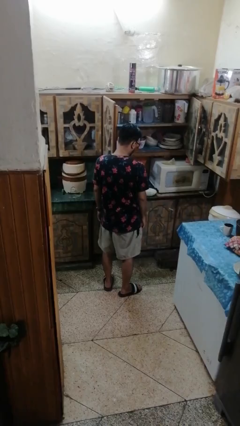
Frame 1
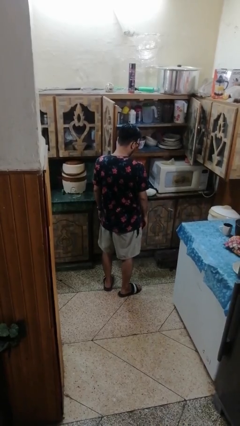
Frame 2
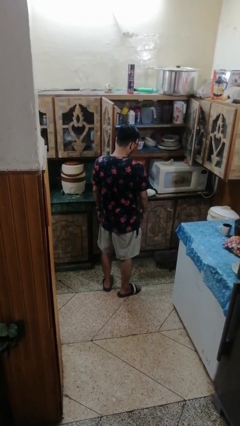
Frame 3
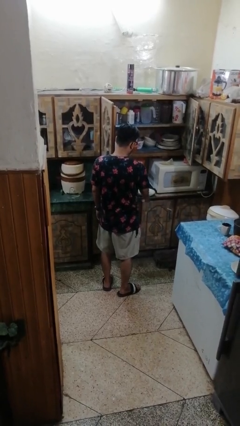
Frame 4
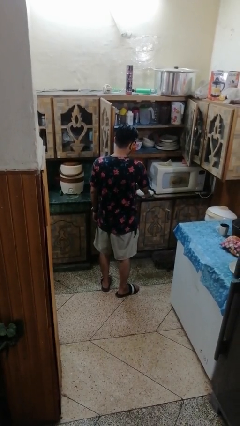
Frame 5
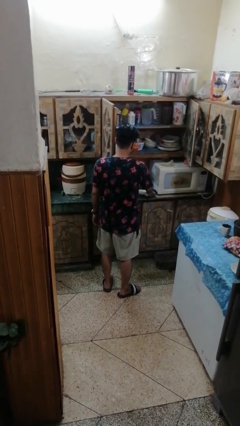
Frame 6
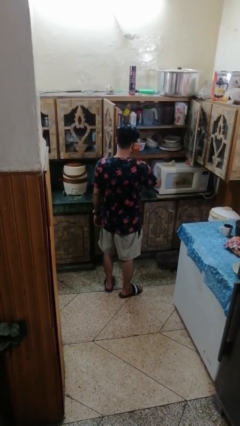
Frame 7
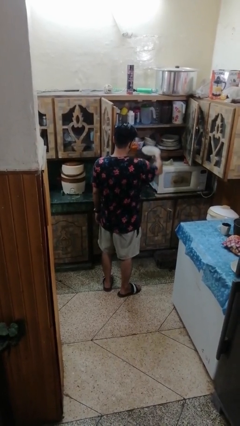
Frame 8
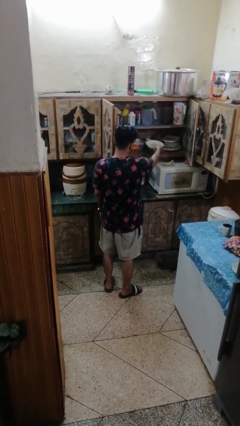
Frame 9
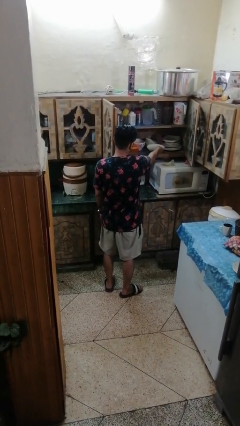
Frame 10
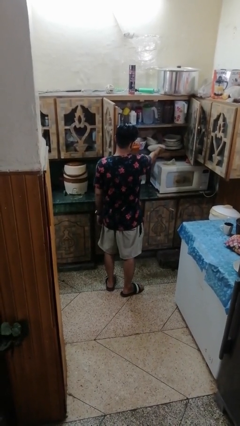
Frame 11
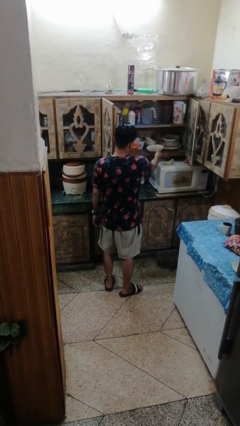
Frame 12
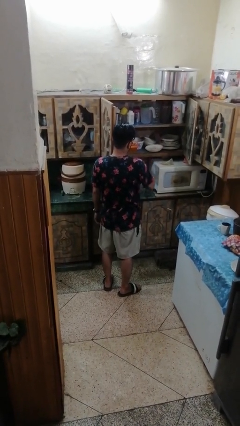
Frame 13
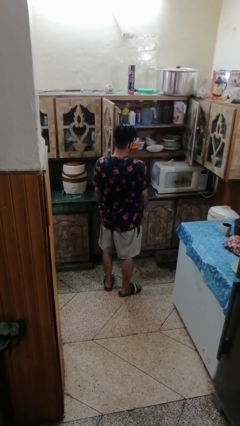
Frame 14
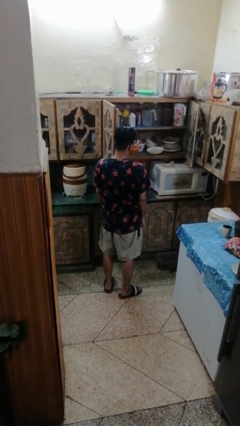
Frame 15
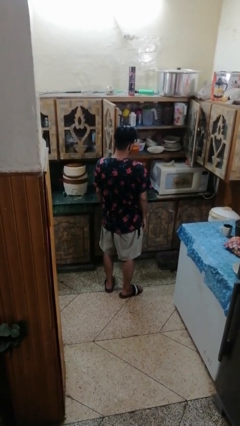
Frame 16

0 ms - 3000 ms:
person puts object in cabinet

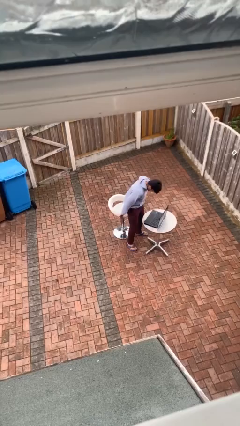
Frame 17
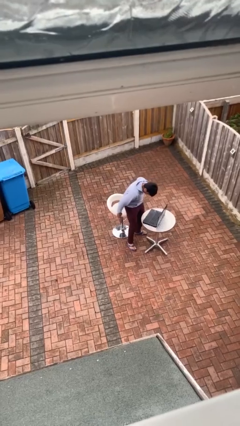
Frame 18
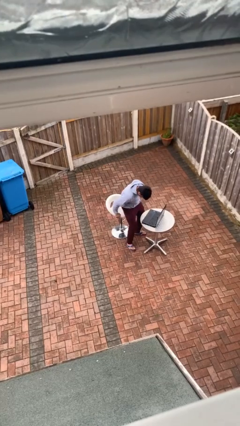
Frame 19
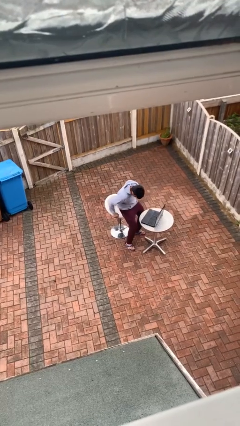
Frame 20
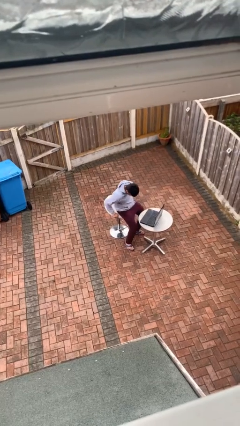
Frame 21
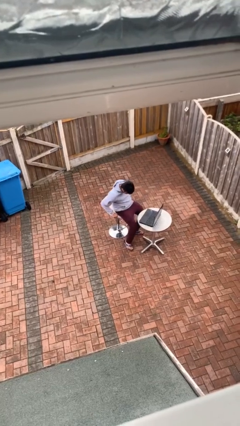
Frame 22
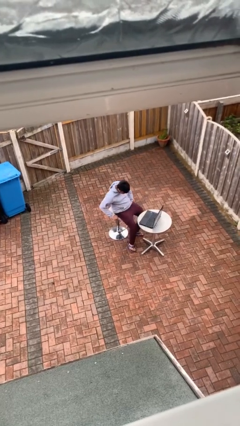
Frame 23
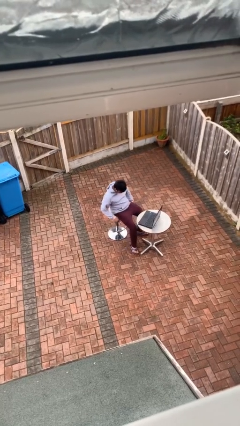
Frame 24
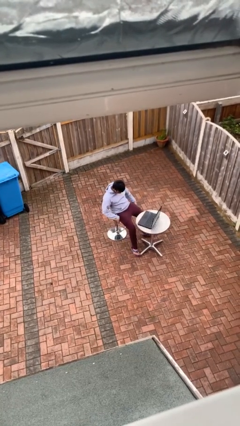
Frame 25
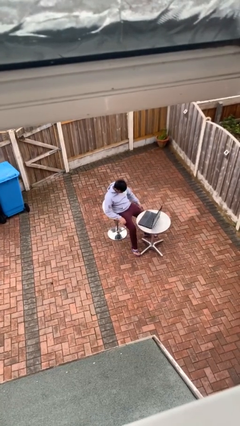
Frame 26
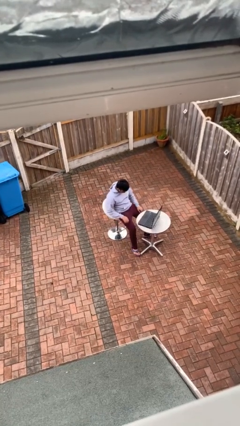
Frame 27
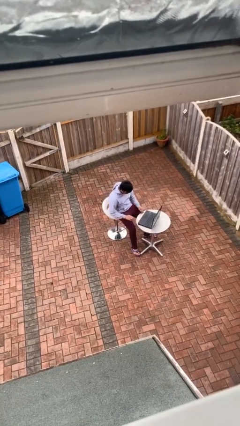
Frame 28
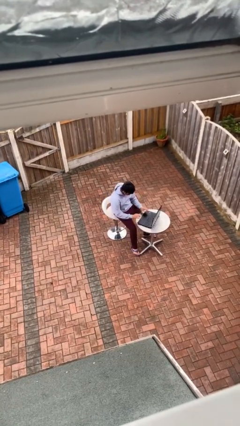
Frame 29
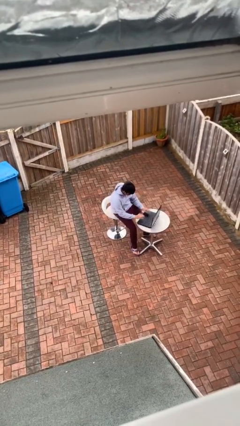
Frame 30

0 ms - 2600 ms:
person sits down

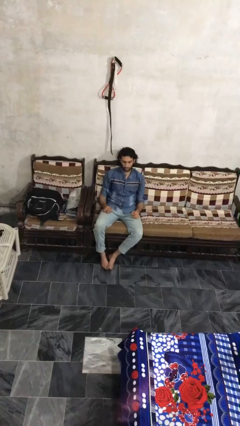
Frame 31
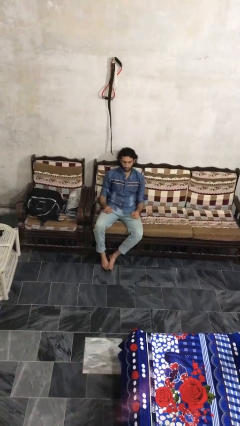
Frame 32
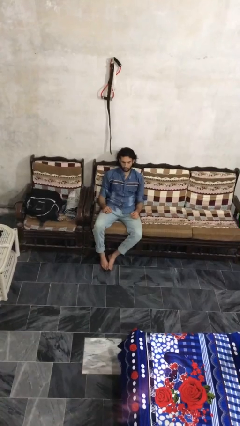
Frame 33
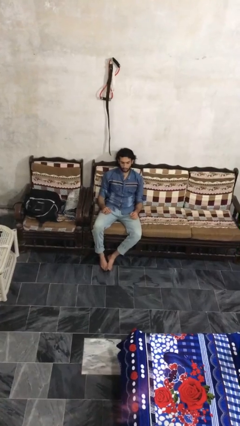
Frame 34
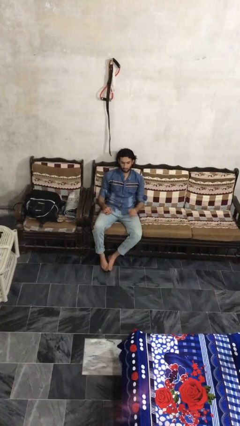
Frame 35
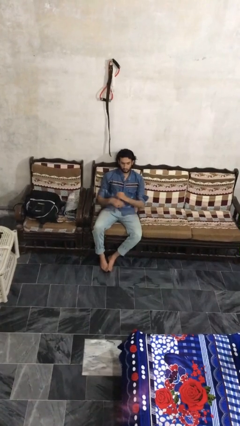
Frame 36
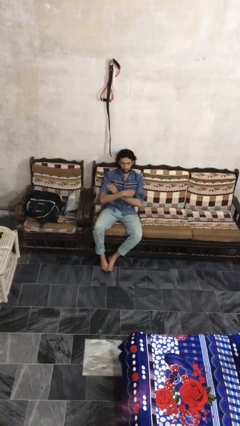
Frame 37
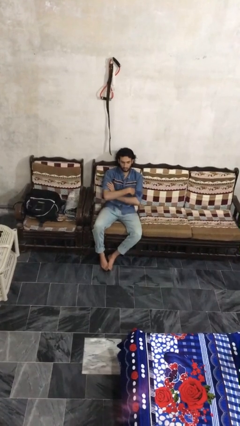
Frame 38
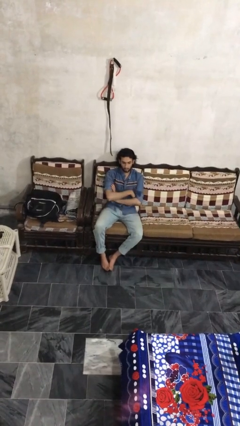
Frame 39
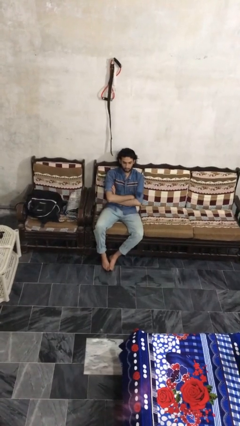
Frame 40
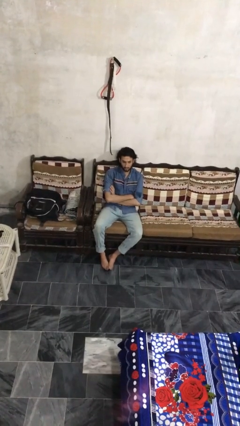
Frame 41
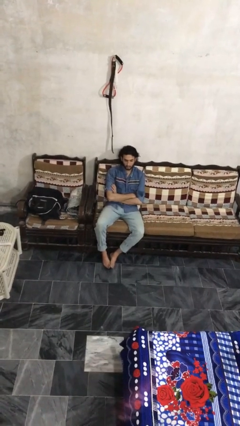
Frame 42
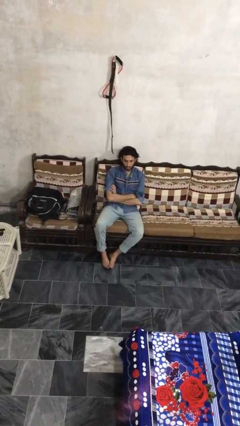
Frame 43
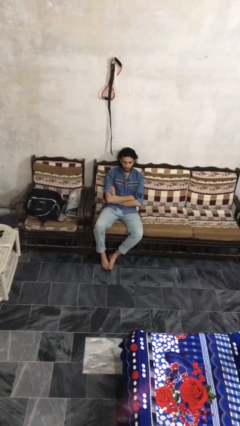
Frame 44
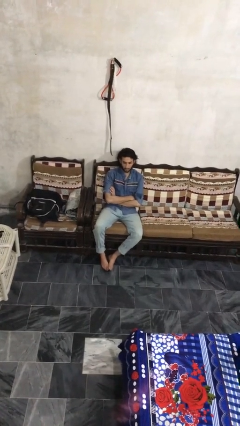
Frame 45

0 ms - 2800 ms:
person crosses arms

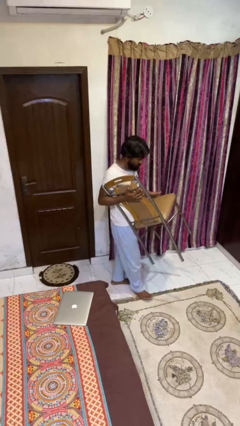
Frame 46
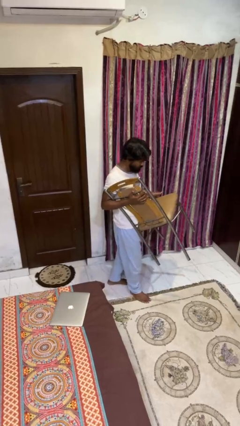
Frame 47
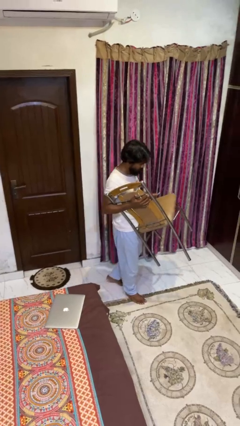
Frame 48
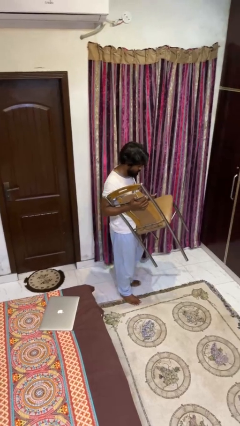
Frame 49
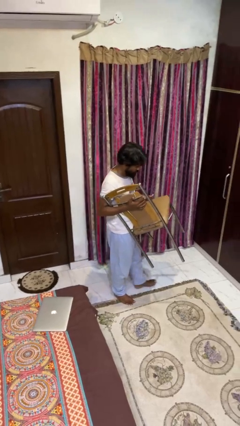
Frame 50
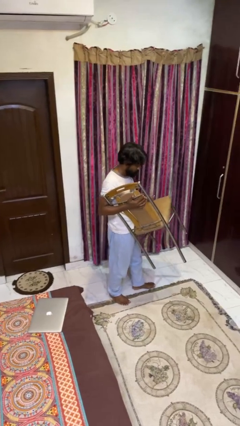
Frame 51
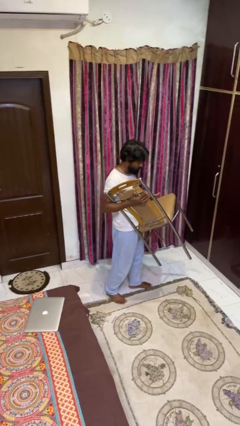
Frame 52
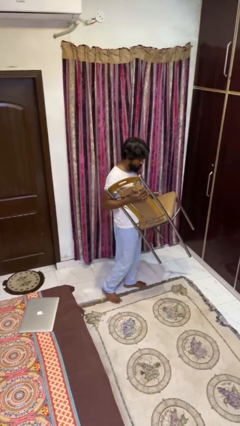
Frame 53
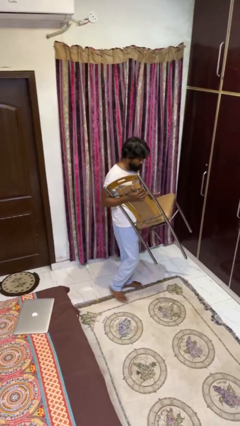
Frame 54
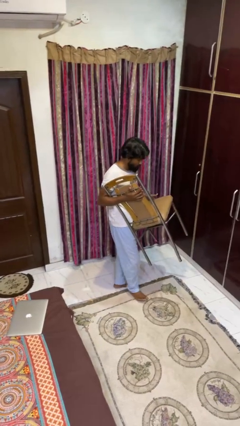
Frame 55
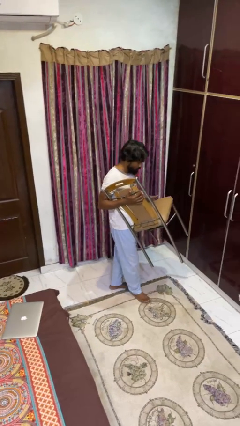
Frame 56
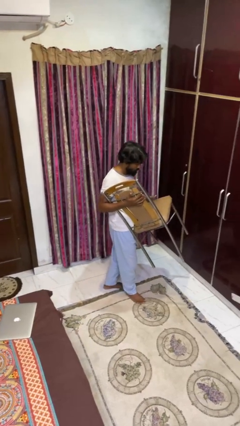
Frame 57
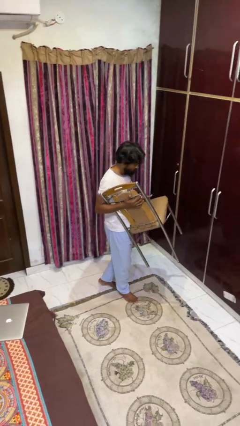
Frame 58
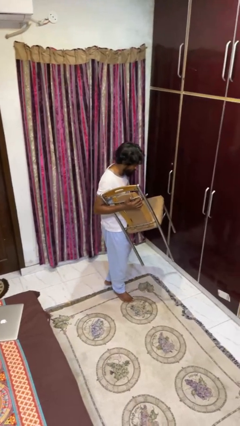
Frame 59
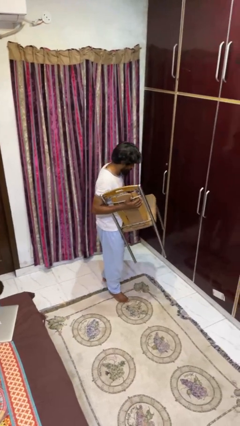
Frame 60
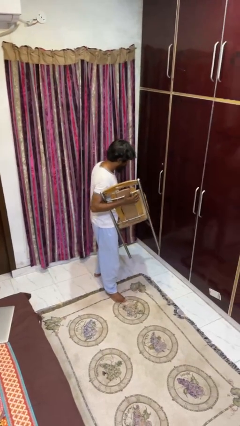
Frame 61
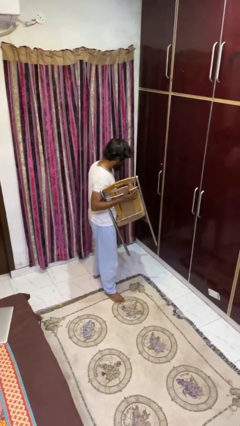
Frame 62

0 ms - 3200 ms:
person carries furniture

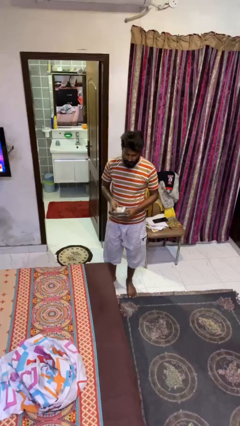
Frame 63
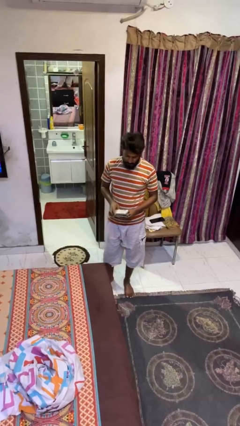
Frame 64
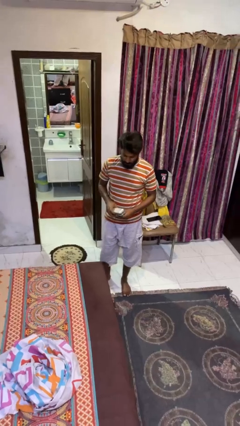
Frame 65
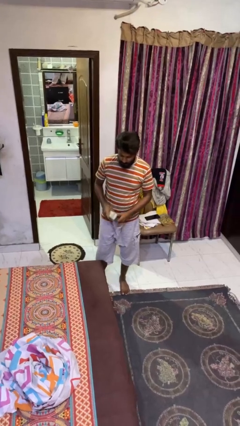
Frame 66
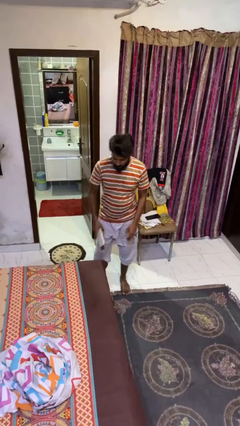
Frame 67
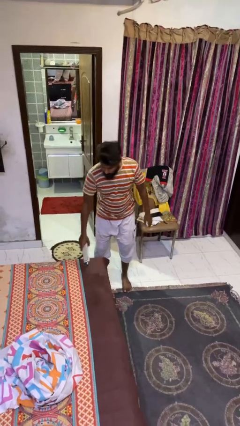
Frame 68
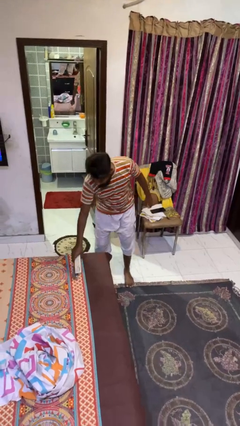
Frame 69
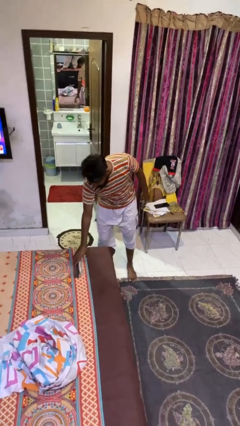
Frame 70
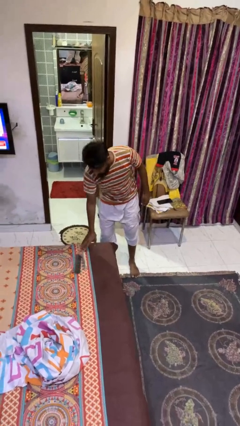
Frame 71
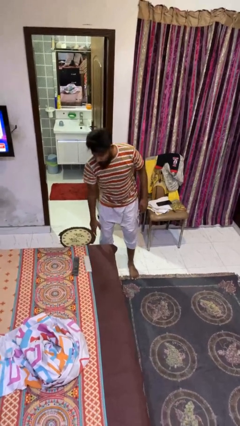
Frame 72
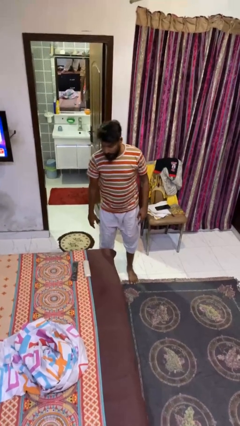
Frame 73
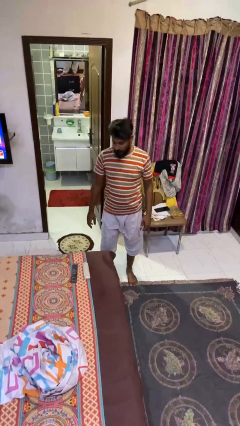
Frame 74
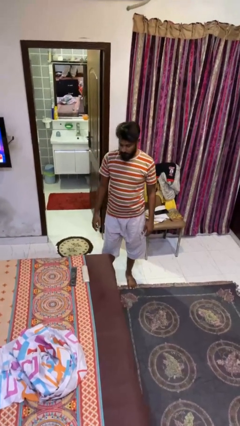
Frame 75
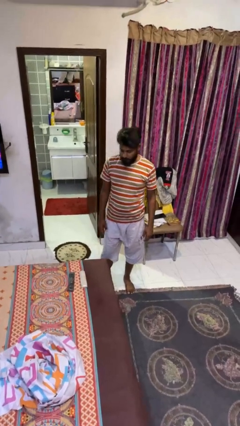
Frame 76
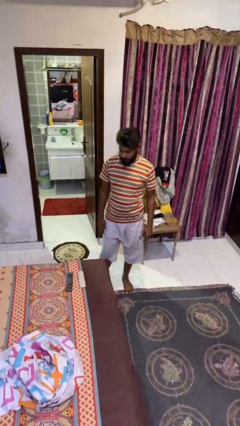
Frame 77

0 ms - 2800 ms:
person puts down object on bed

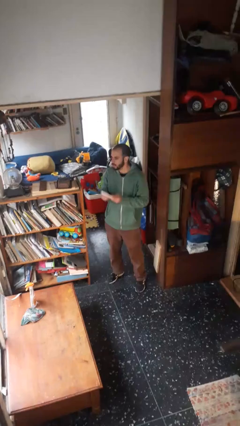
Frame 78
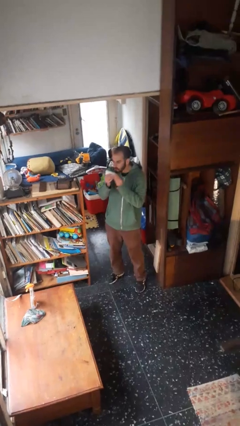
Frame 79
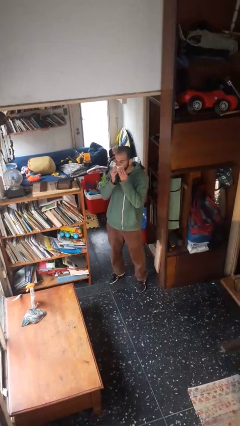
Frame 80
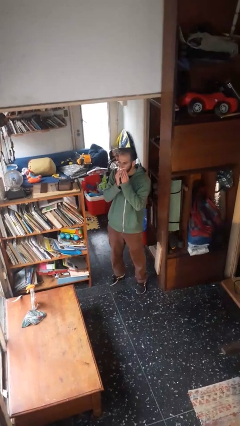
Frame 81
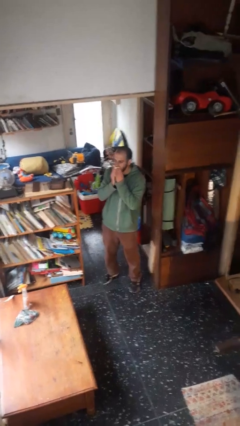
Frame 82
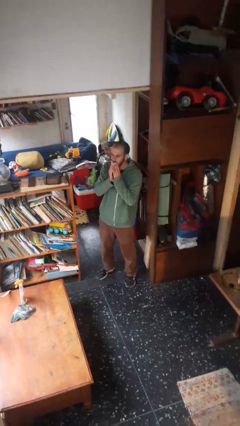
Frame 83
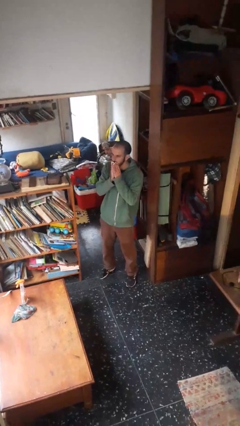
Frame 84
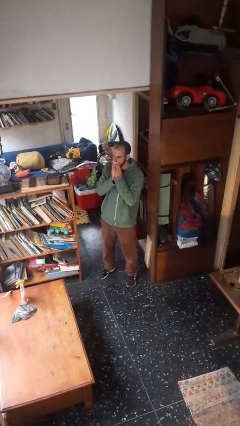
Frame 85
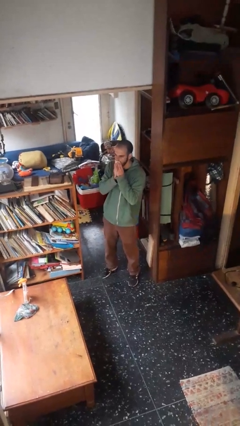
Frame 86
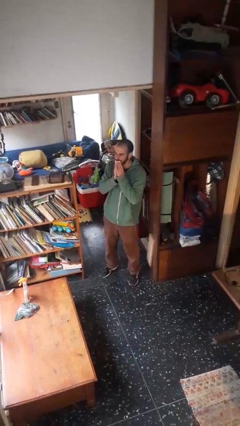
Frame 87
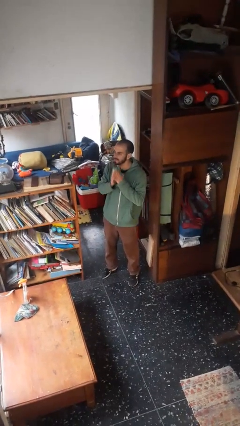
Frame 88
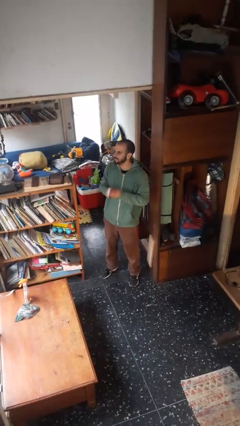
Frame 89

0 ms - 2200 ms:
person wipes mouth with napkin

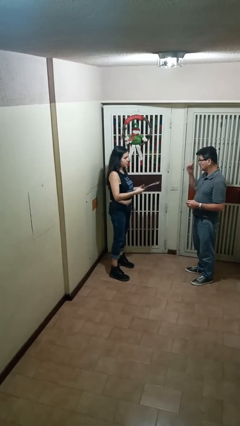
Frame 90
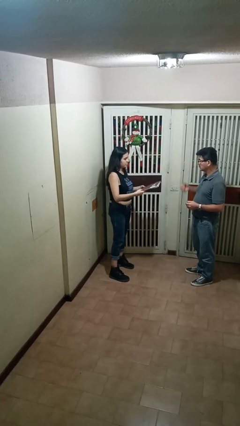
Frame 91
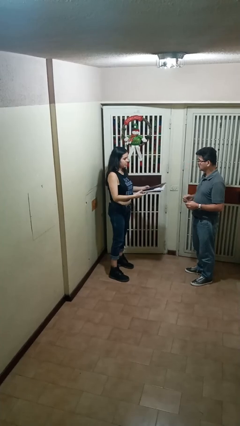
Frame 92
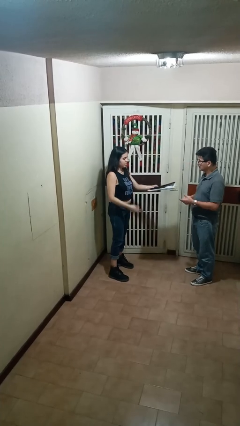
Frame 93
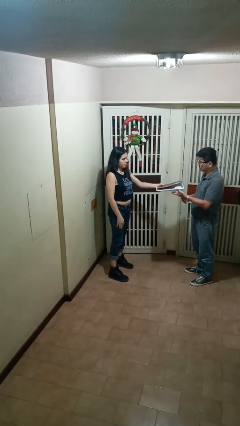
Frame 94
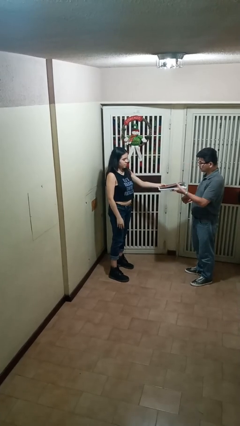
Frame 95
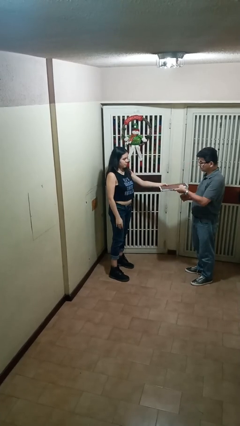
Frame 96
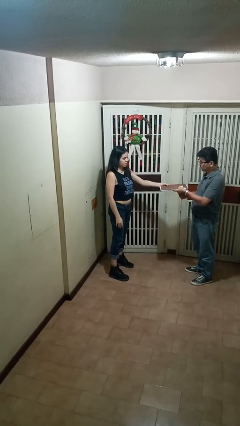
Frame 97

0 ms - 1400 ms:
person transfers object to person
